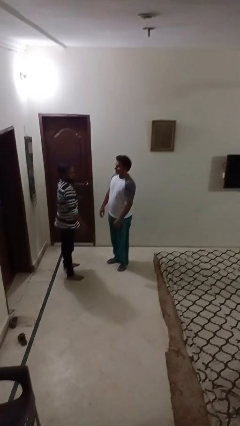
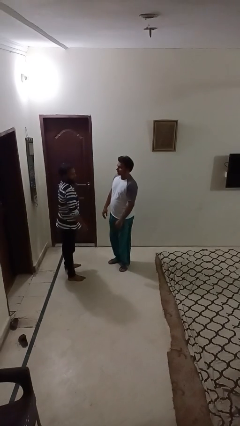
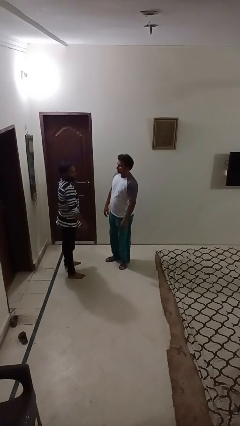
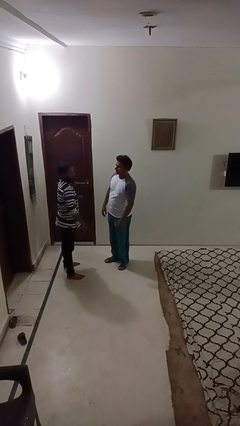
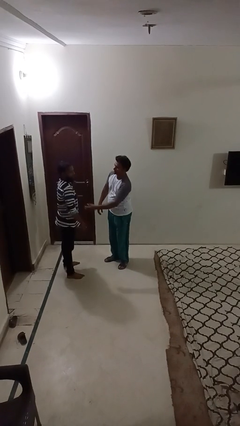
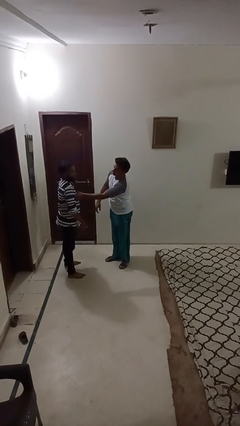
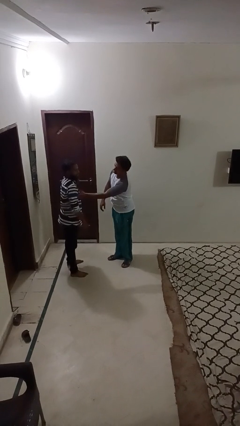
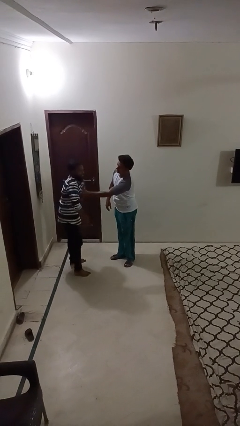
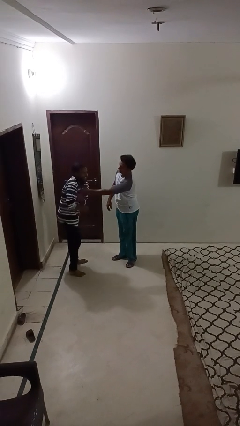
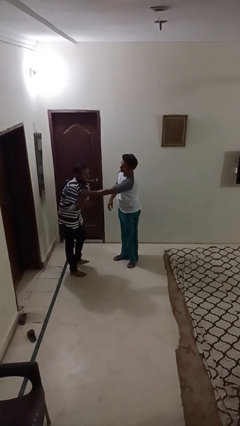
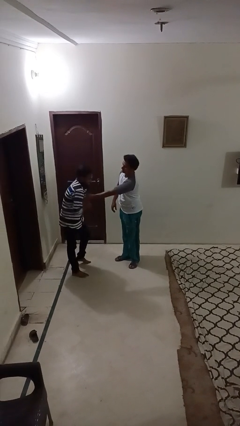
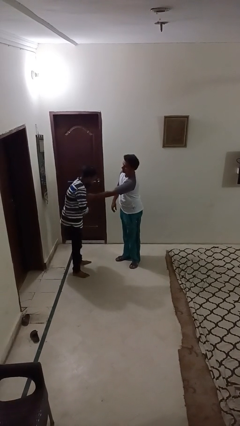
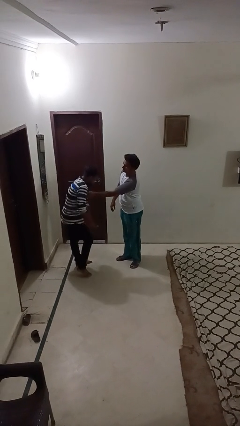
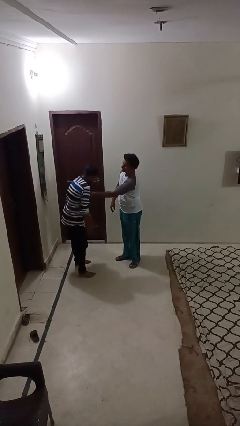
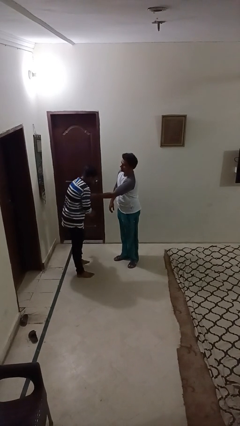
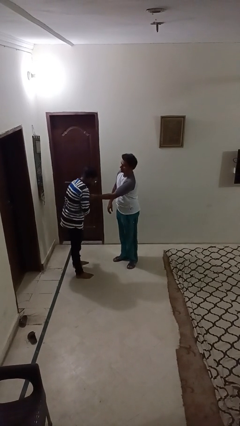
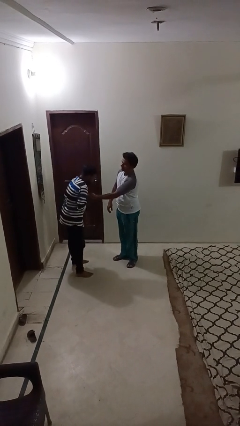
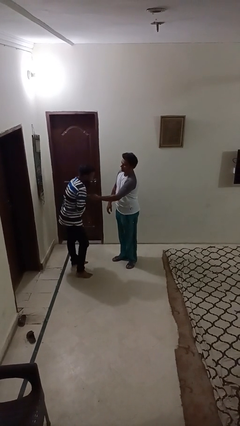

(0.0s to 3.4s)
person tickles person

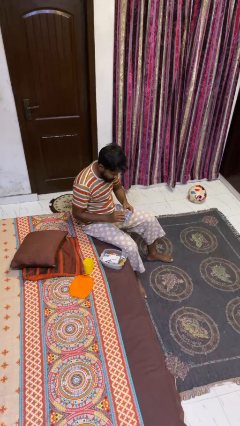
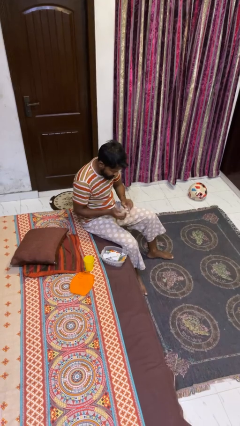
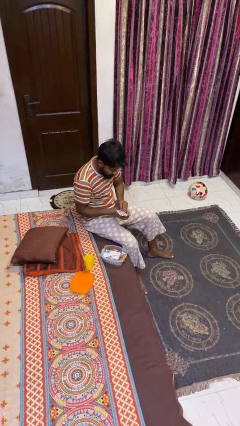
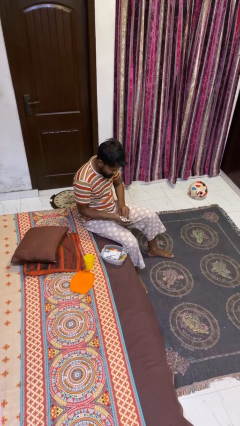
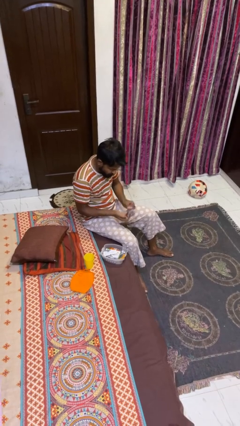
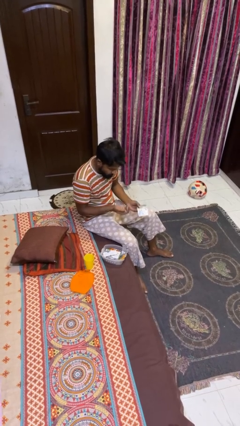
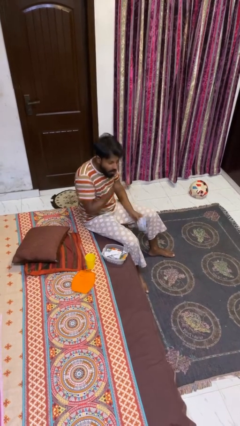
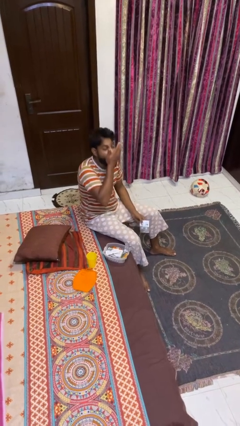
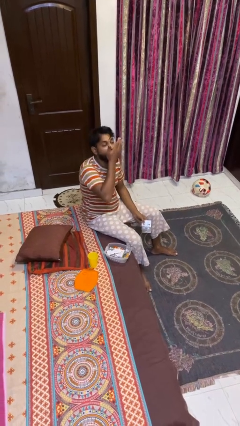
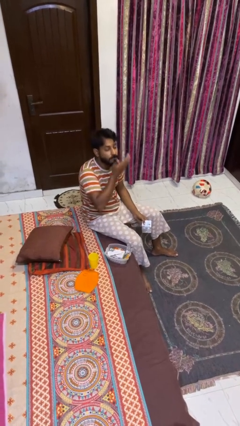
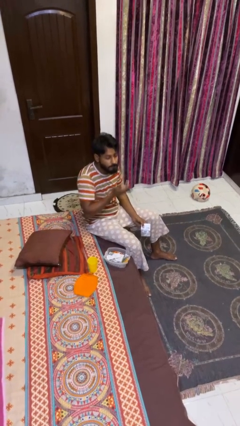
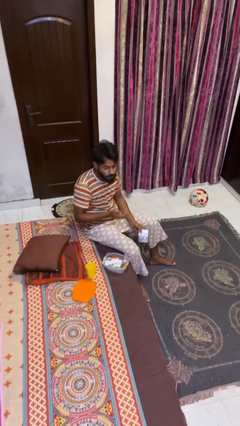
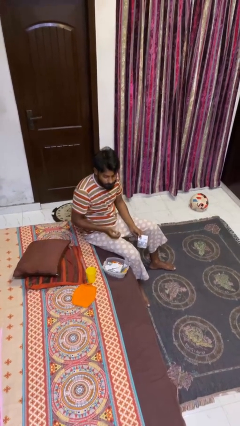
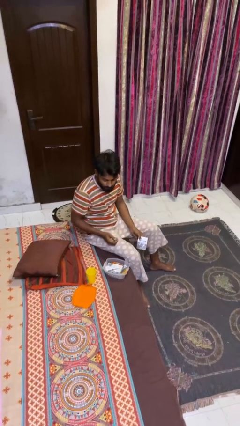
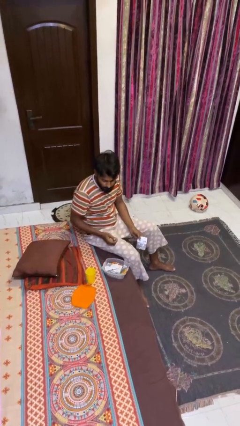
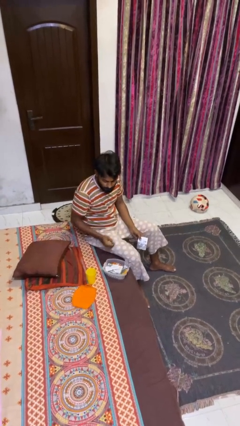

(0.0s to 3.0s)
person takes medicine pills

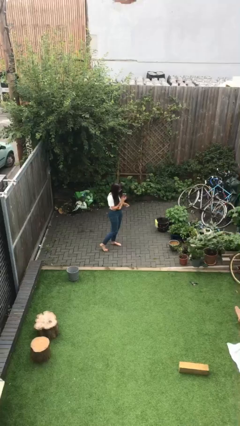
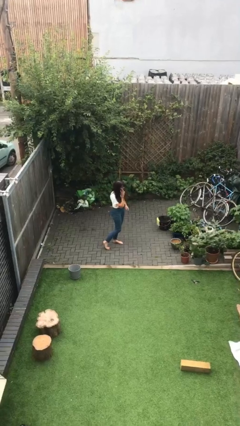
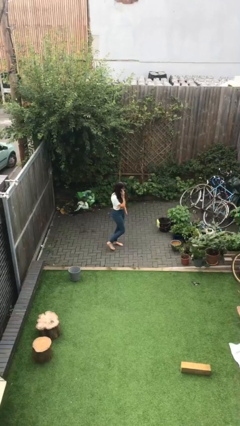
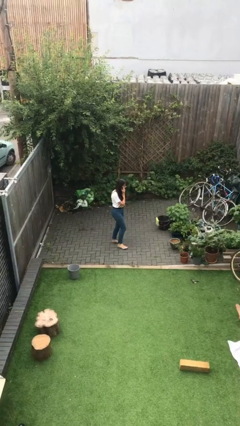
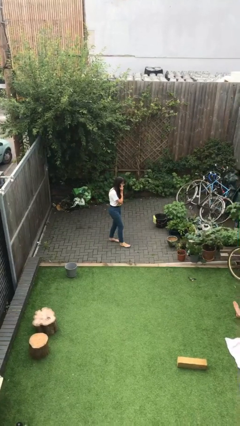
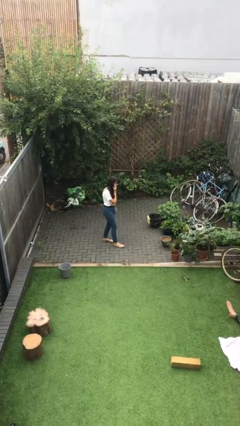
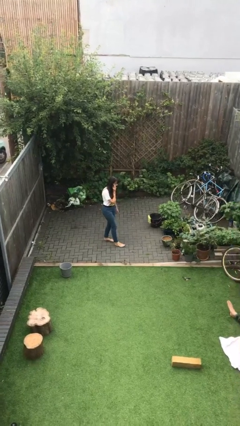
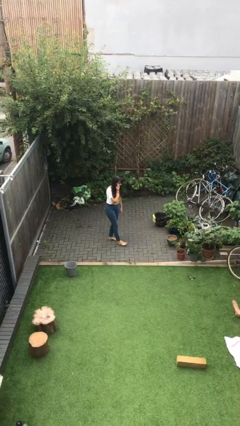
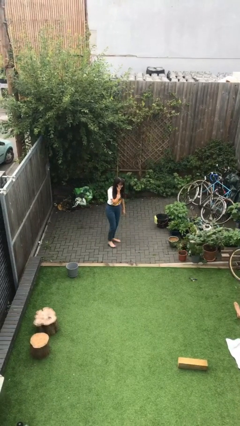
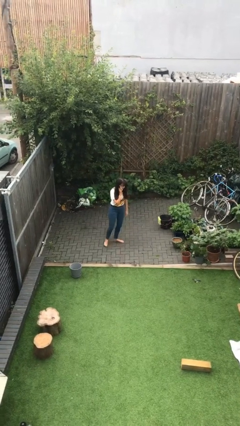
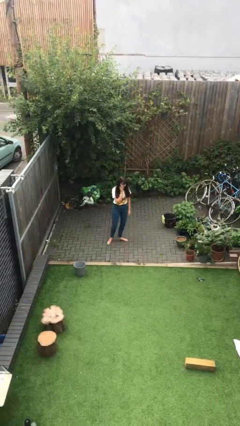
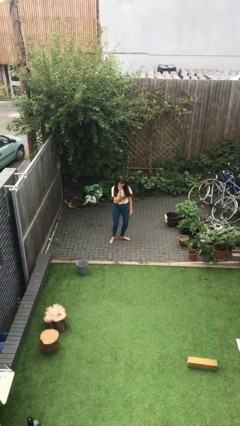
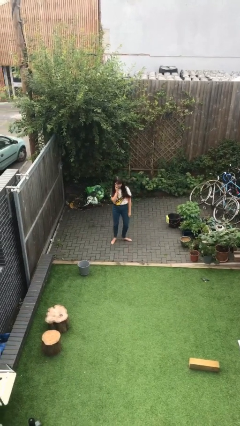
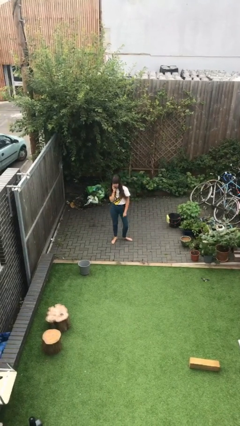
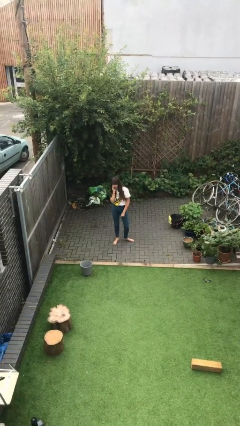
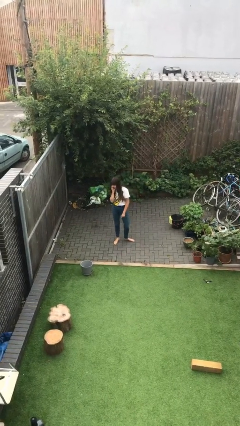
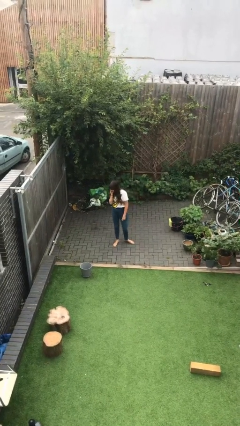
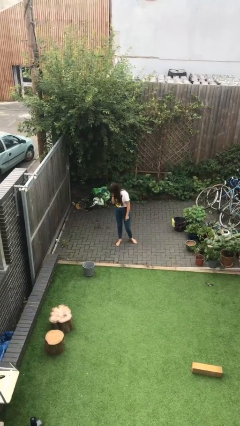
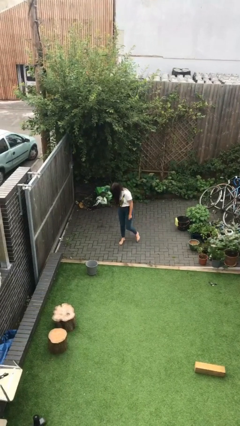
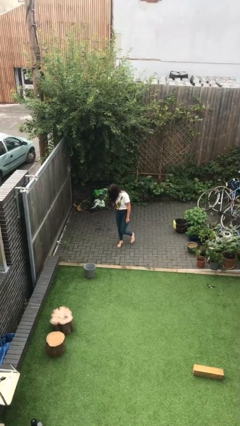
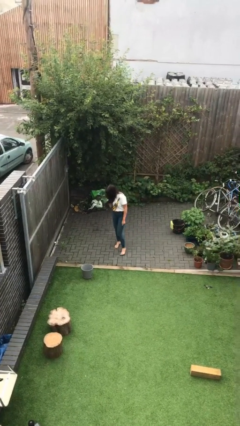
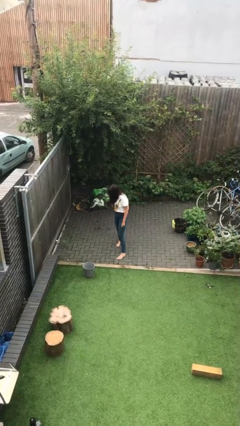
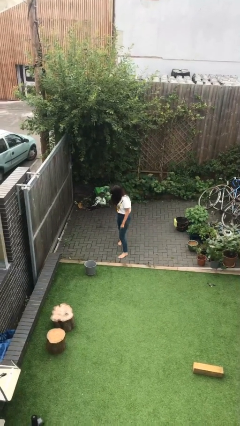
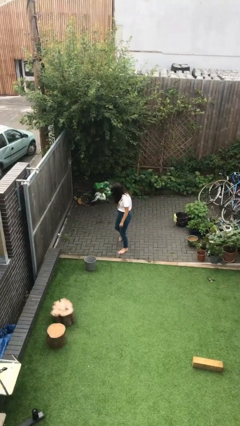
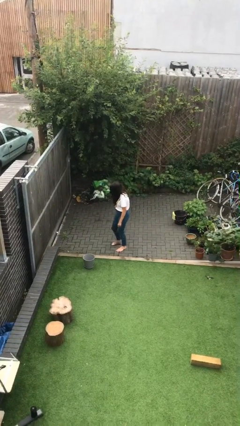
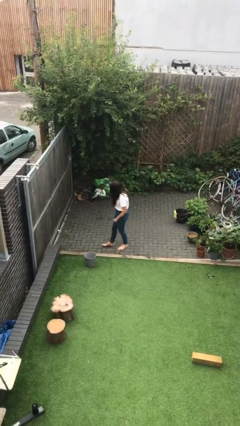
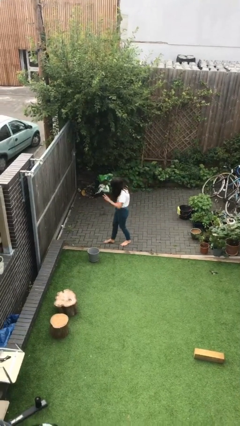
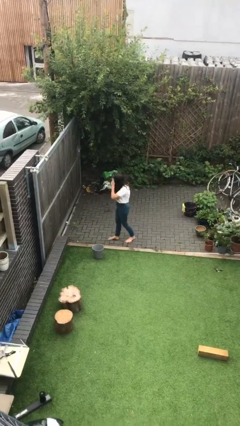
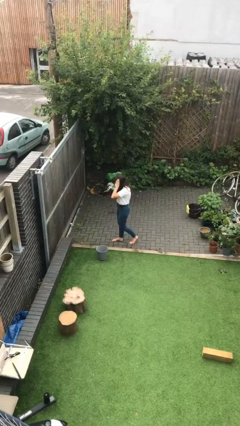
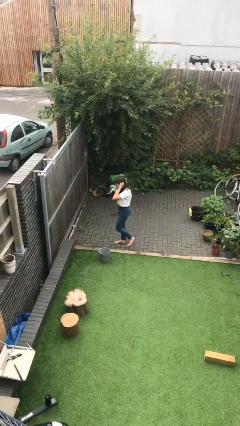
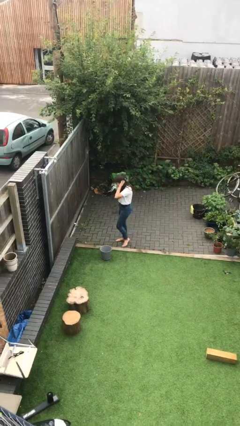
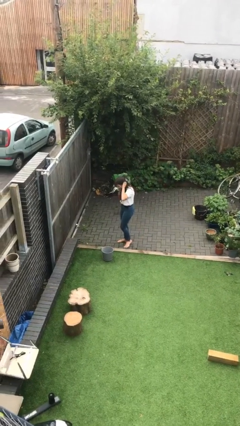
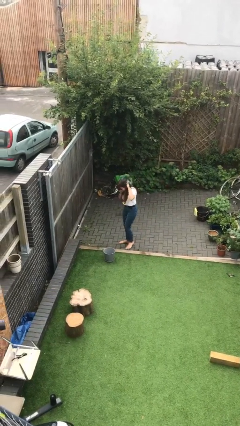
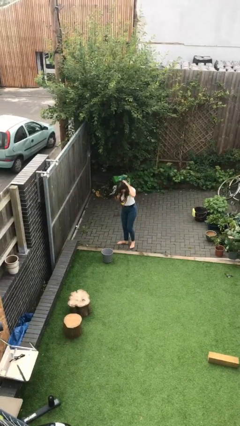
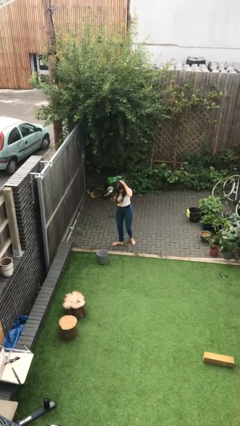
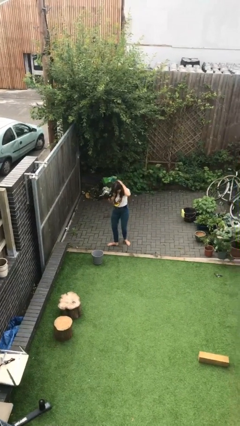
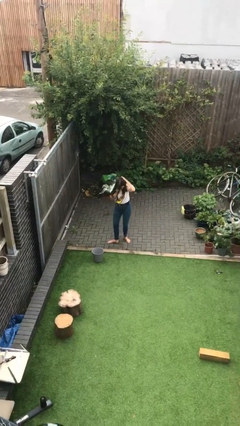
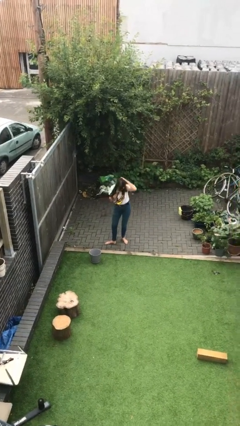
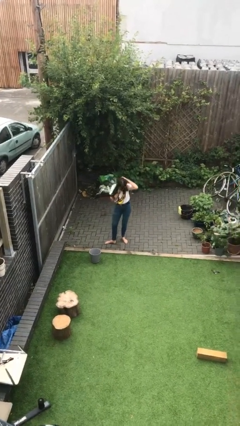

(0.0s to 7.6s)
person talks on phone

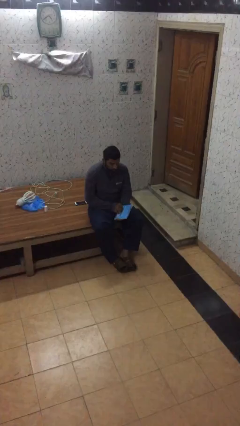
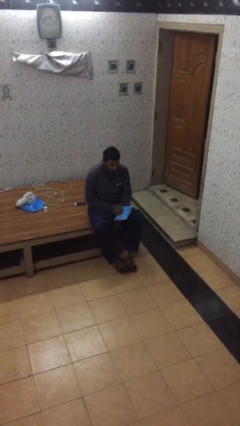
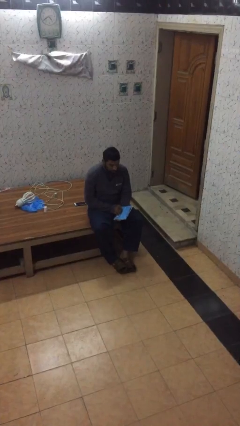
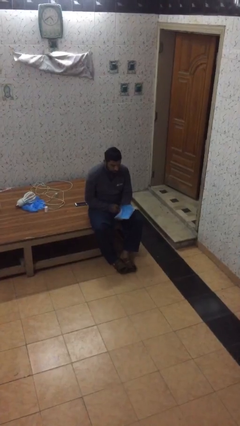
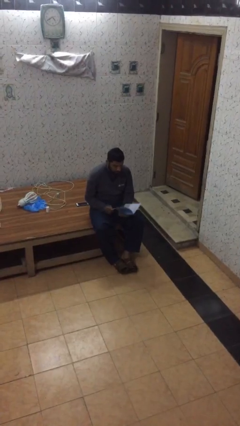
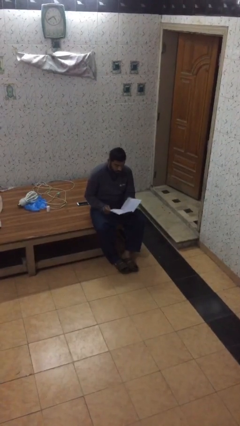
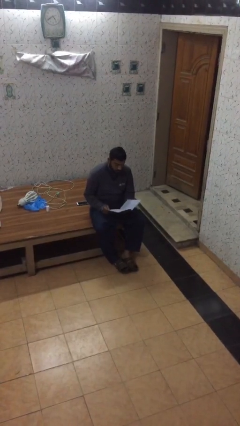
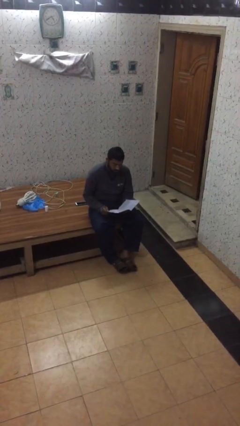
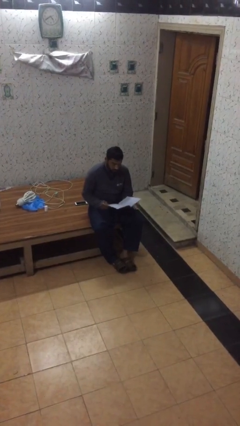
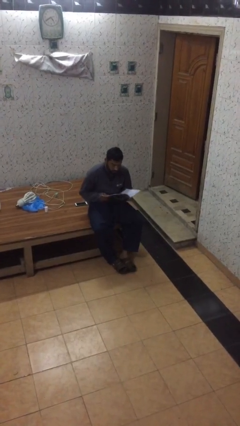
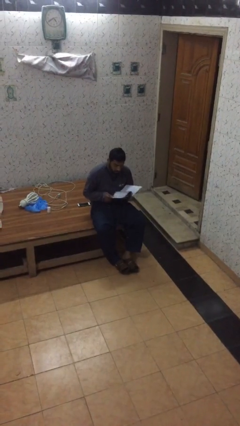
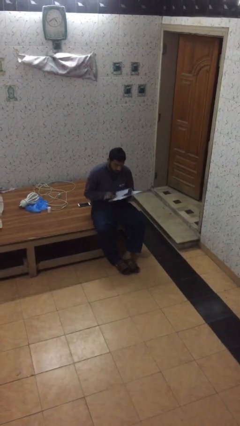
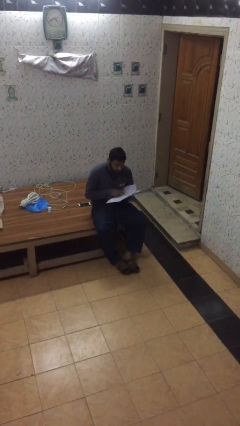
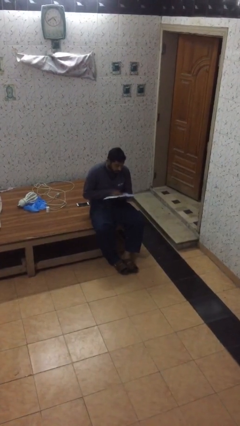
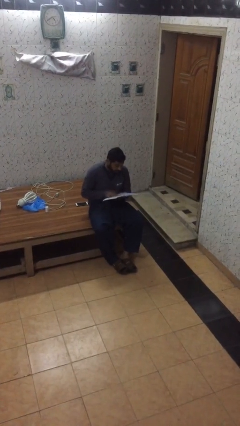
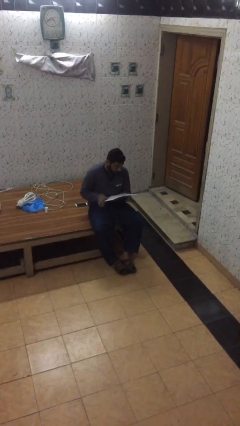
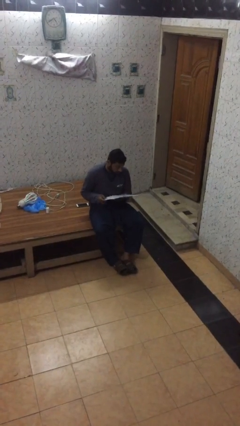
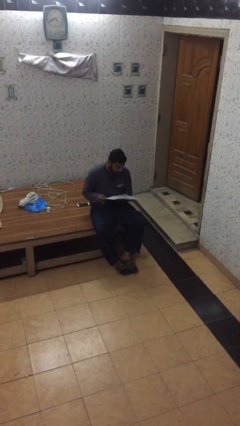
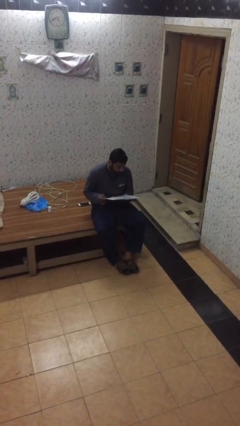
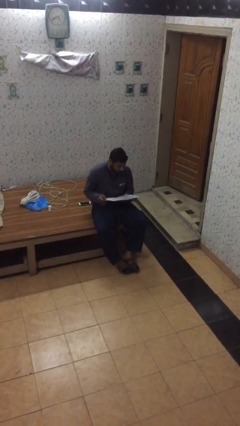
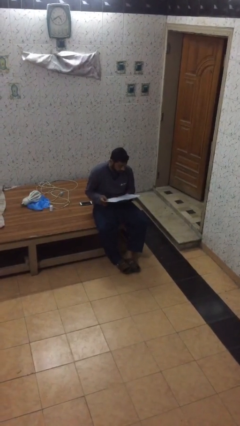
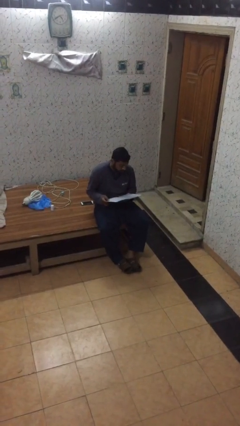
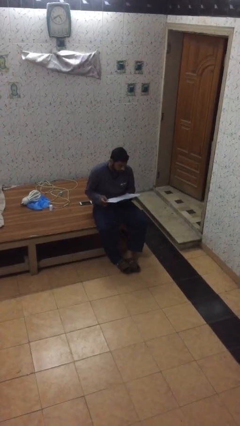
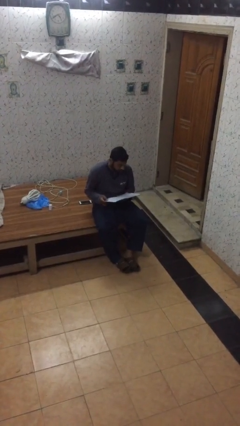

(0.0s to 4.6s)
person reads document
